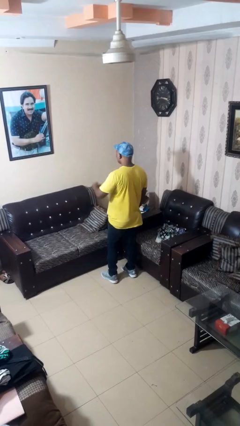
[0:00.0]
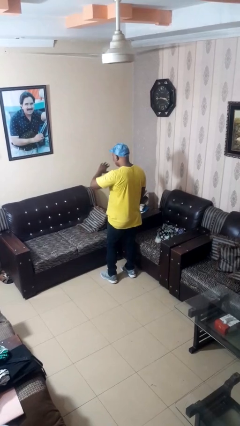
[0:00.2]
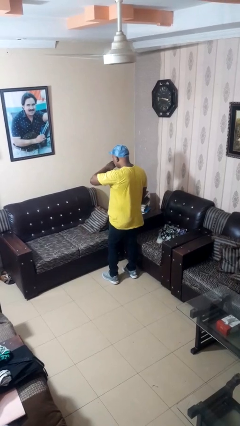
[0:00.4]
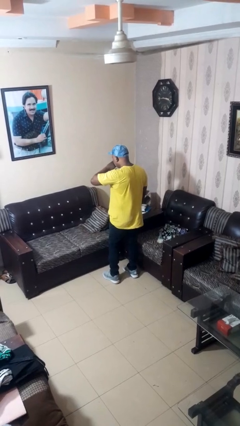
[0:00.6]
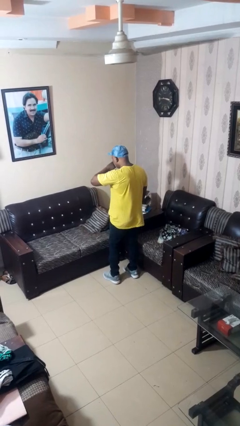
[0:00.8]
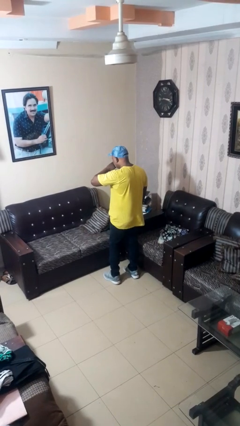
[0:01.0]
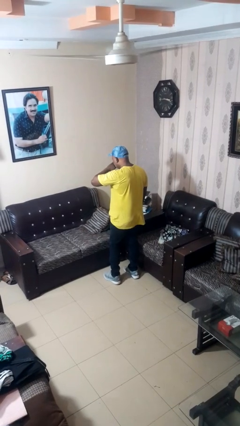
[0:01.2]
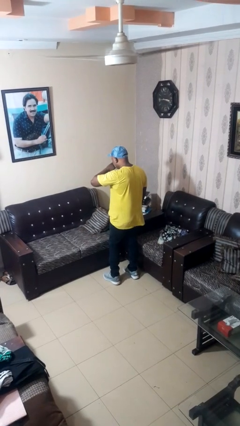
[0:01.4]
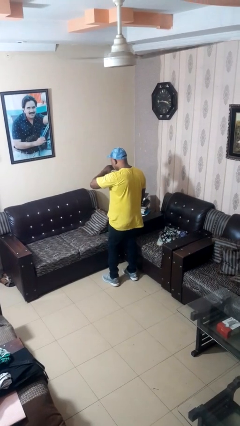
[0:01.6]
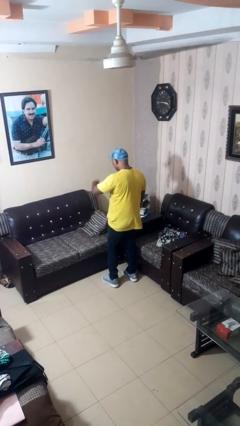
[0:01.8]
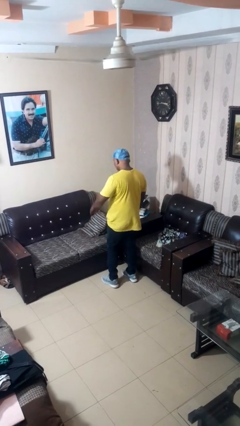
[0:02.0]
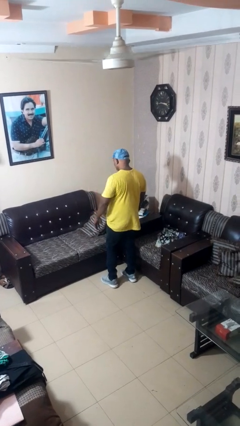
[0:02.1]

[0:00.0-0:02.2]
person yawns

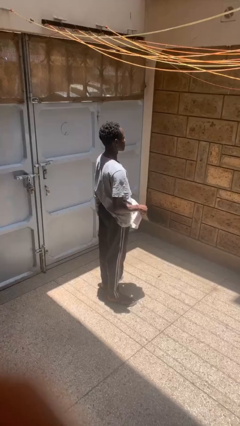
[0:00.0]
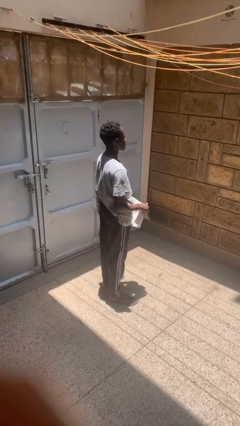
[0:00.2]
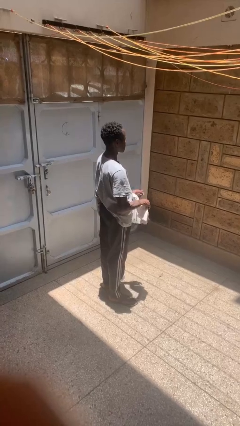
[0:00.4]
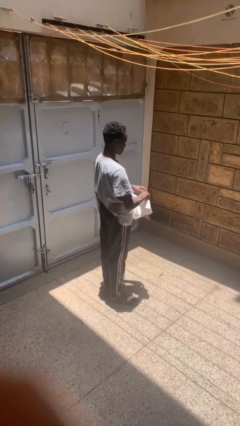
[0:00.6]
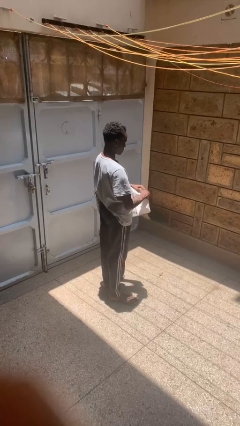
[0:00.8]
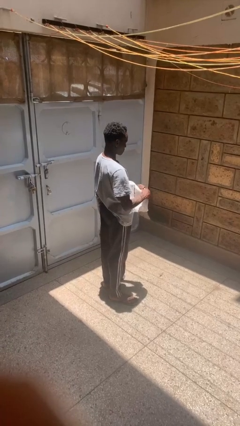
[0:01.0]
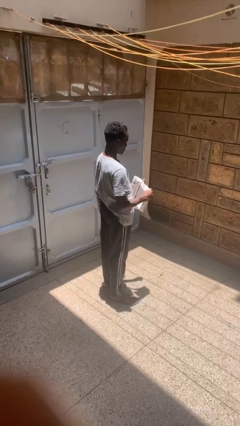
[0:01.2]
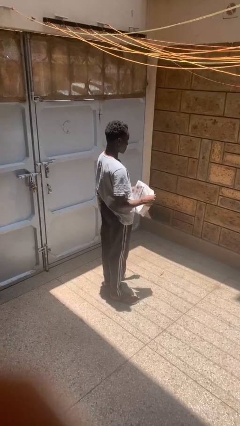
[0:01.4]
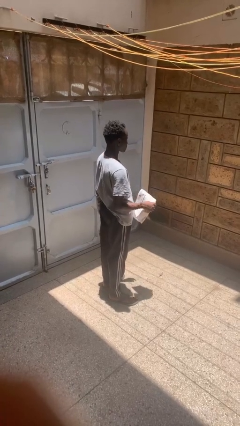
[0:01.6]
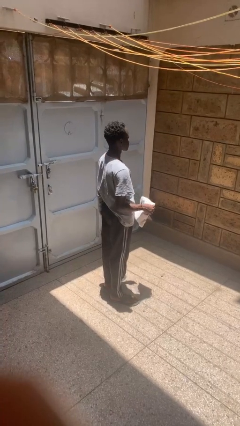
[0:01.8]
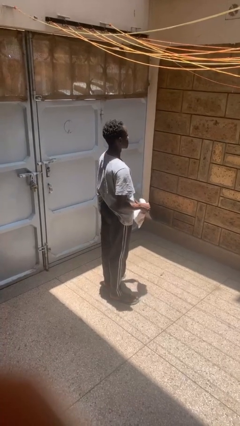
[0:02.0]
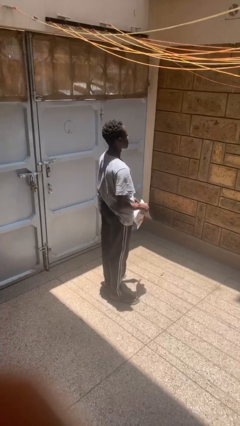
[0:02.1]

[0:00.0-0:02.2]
person tears paper

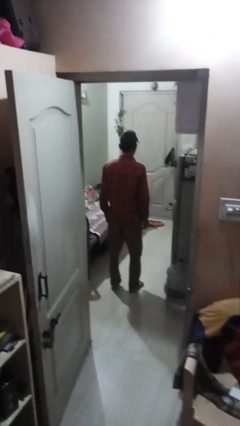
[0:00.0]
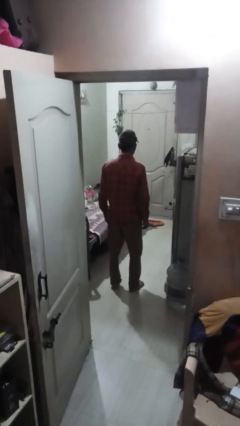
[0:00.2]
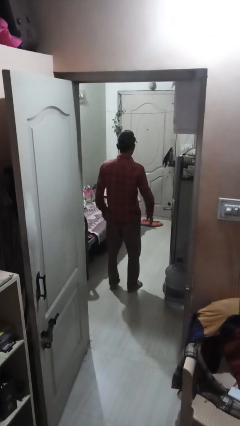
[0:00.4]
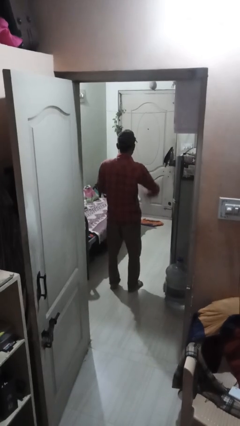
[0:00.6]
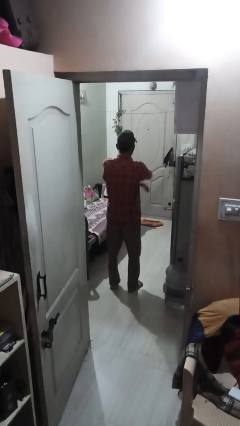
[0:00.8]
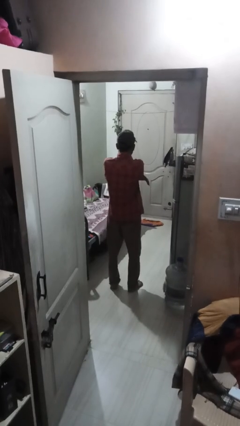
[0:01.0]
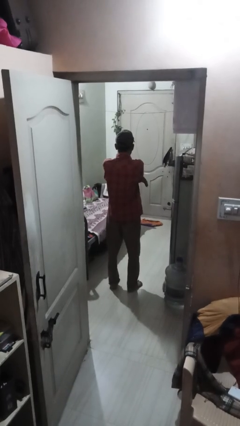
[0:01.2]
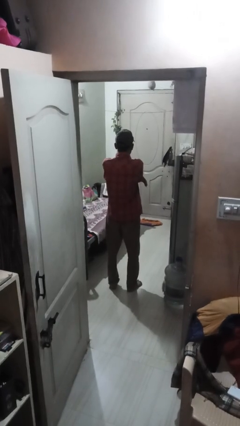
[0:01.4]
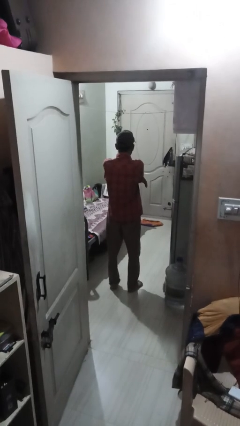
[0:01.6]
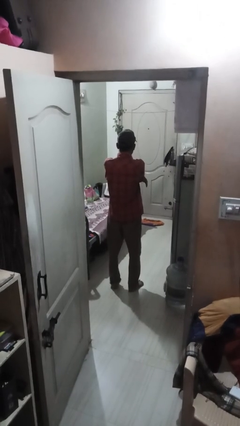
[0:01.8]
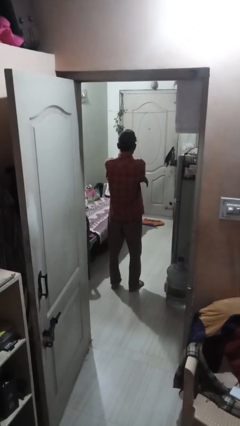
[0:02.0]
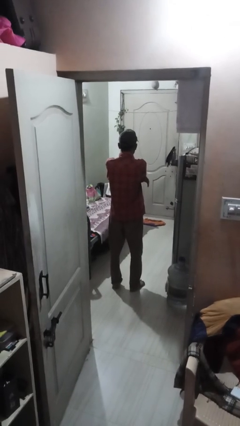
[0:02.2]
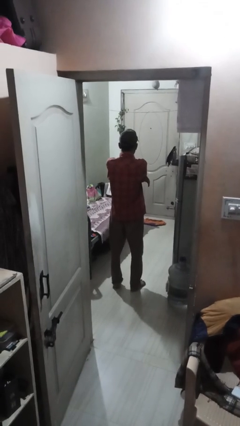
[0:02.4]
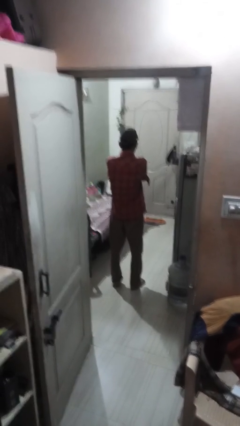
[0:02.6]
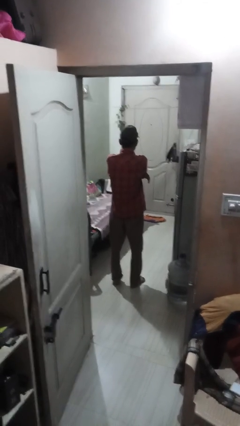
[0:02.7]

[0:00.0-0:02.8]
person crosses arms

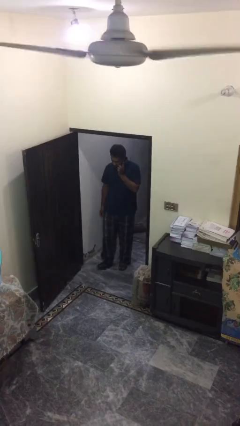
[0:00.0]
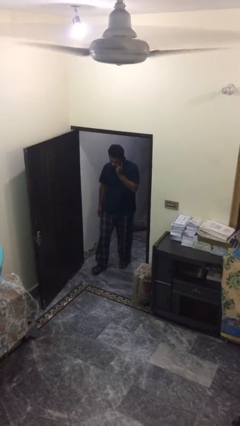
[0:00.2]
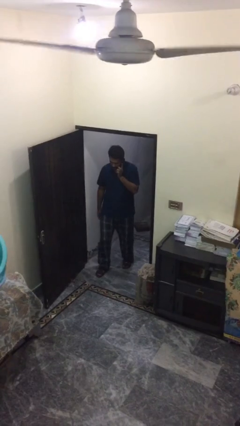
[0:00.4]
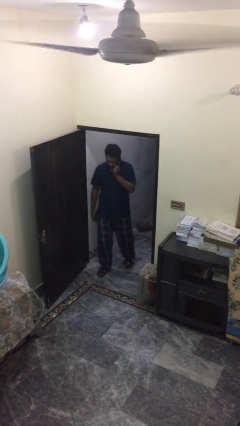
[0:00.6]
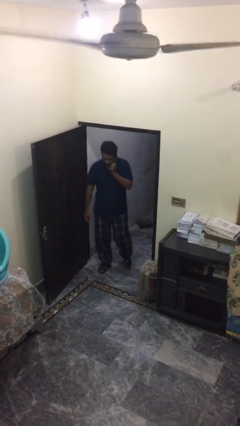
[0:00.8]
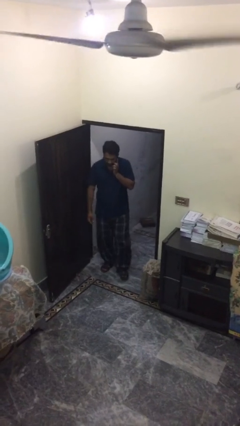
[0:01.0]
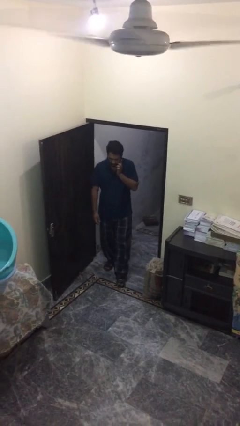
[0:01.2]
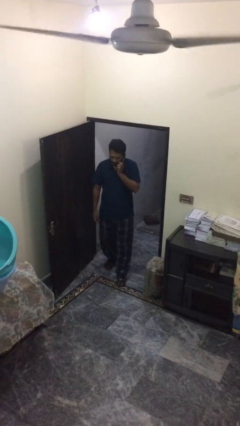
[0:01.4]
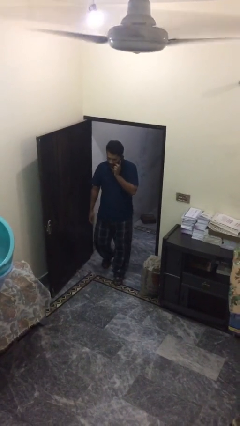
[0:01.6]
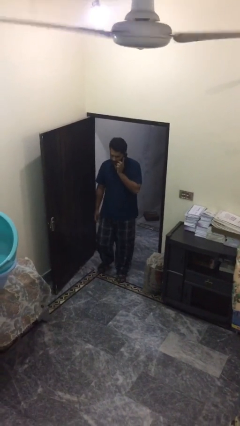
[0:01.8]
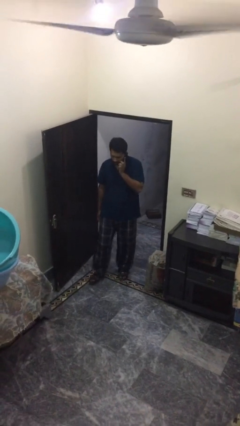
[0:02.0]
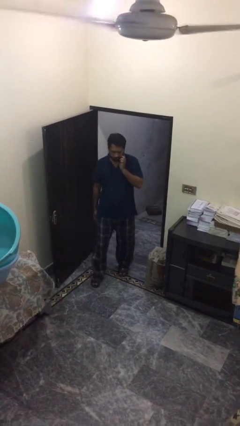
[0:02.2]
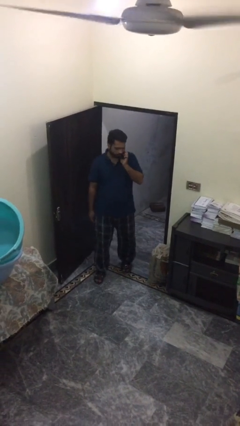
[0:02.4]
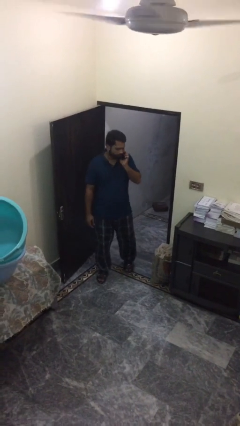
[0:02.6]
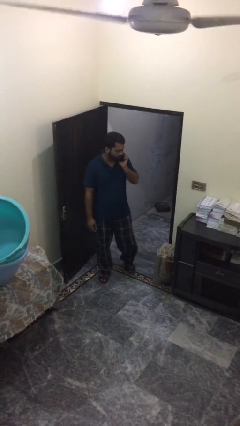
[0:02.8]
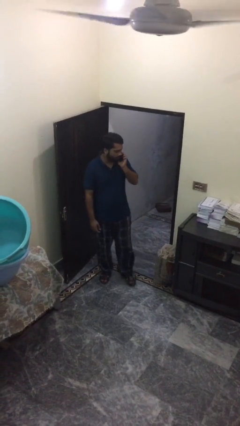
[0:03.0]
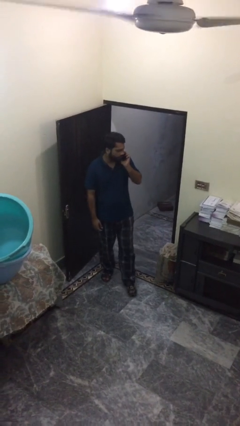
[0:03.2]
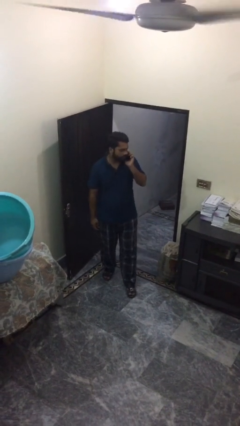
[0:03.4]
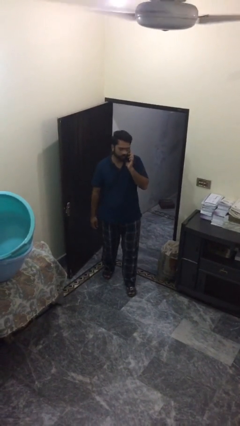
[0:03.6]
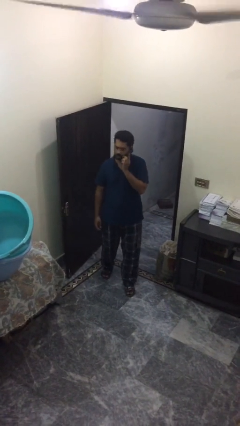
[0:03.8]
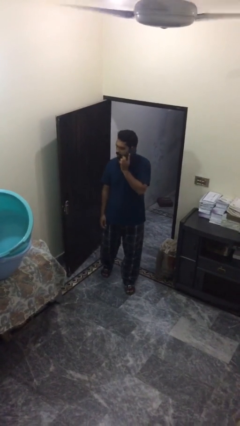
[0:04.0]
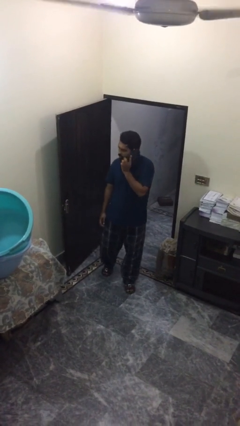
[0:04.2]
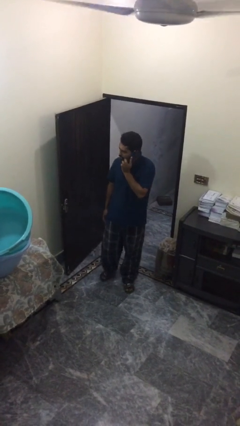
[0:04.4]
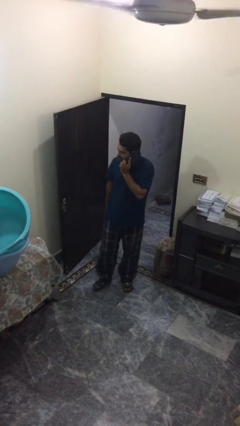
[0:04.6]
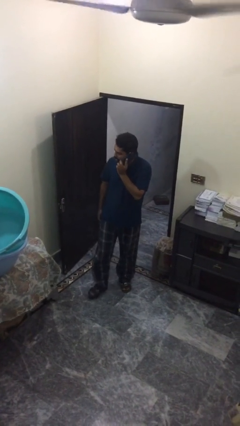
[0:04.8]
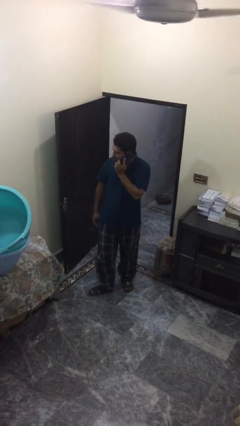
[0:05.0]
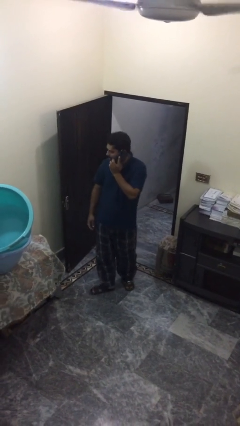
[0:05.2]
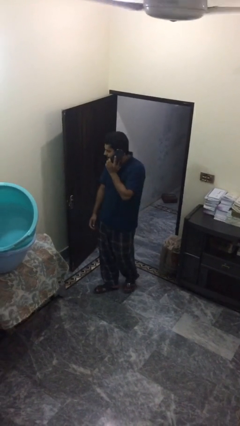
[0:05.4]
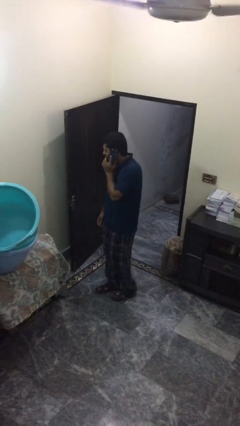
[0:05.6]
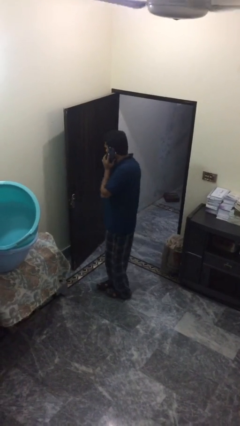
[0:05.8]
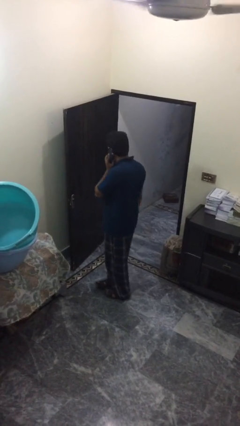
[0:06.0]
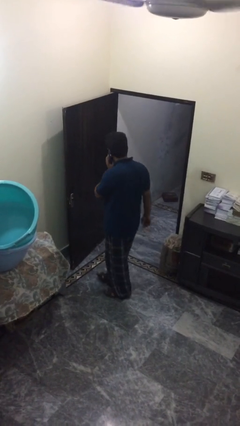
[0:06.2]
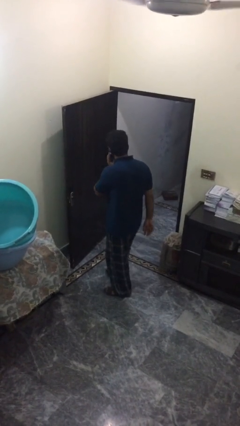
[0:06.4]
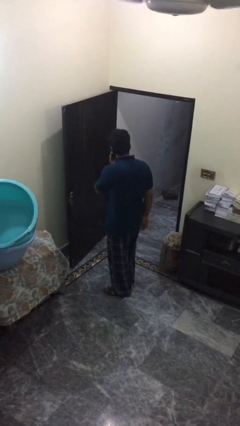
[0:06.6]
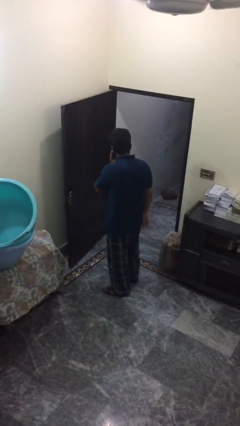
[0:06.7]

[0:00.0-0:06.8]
person enters scene through structure

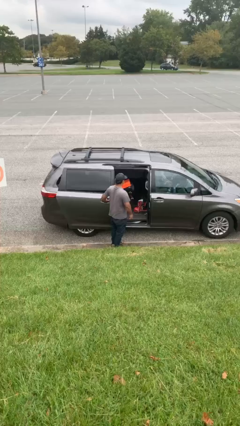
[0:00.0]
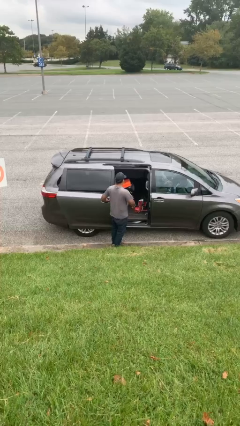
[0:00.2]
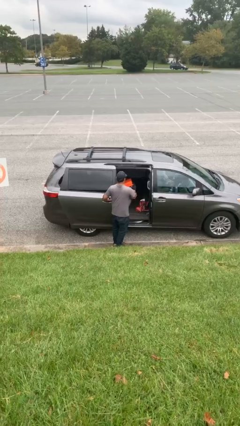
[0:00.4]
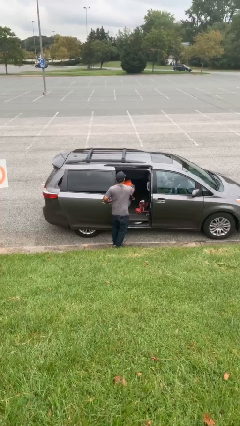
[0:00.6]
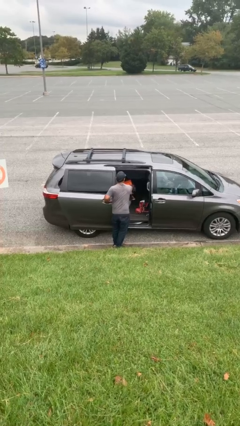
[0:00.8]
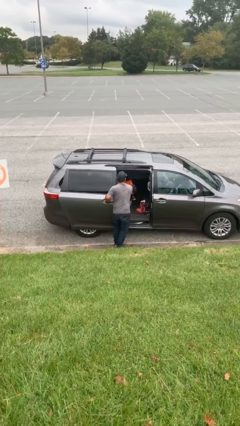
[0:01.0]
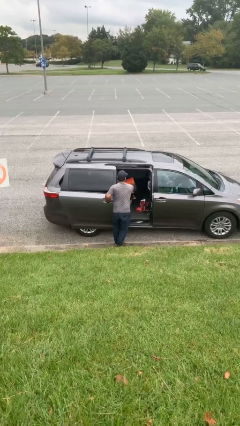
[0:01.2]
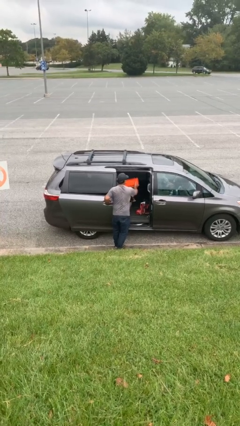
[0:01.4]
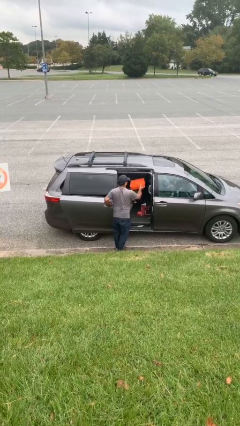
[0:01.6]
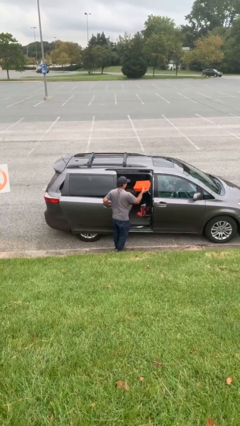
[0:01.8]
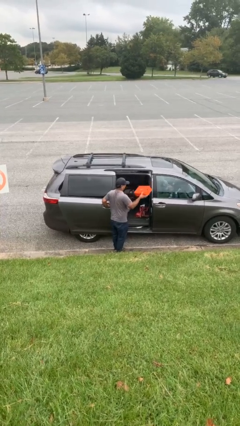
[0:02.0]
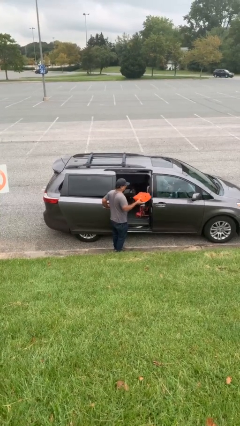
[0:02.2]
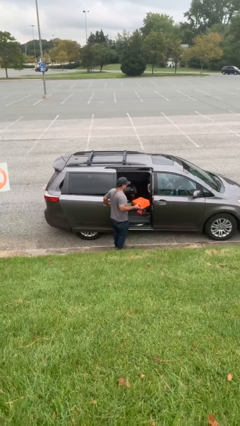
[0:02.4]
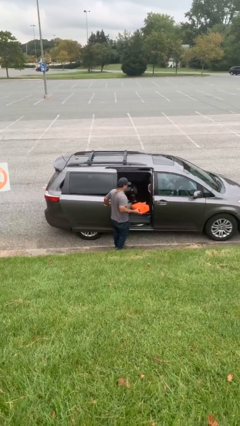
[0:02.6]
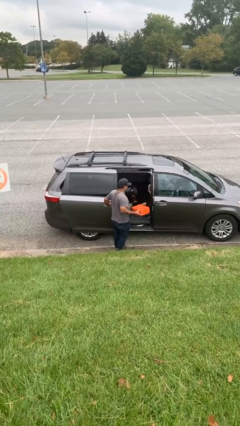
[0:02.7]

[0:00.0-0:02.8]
person unloads car

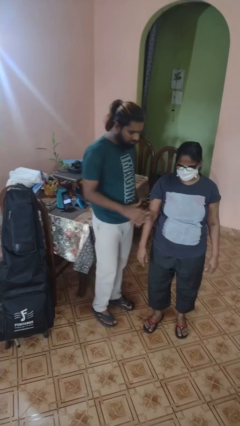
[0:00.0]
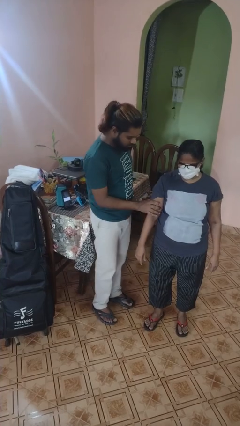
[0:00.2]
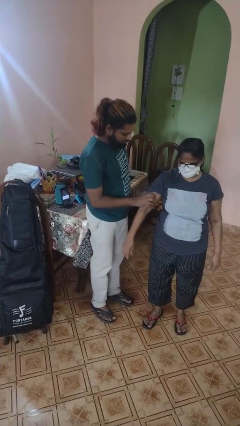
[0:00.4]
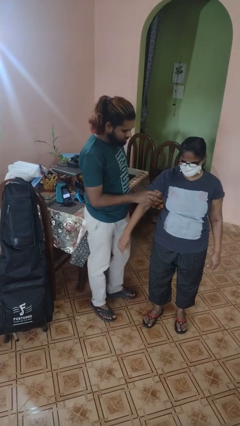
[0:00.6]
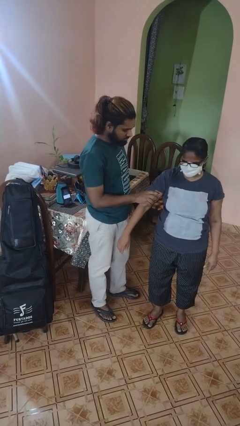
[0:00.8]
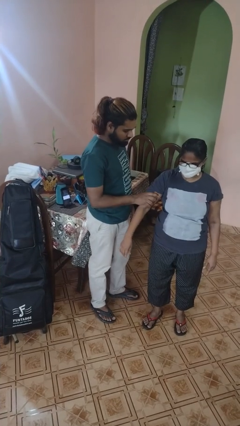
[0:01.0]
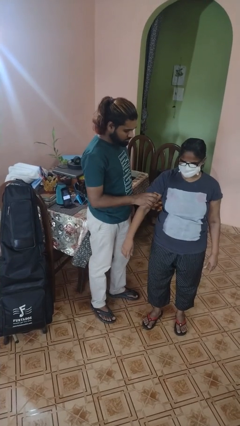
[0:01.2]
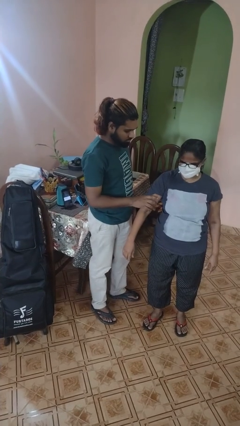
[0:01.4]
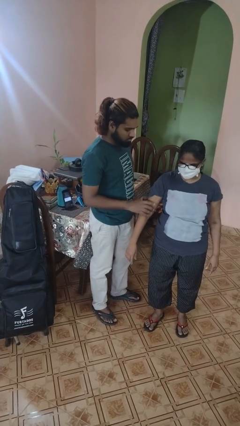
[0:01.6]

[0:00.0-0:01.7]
person grabs person by bicep
